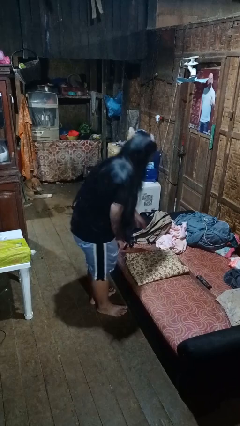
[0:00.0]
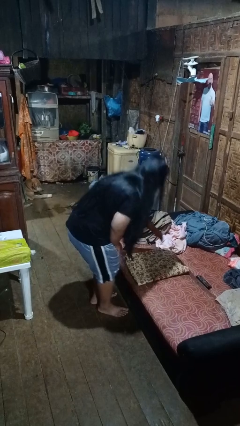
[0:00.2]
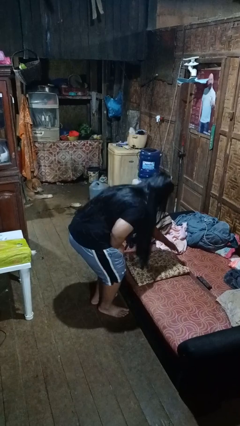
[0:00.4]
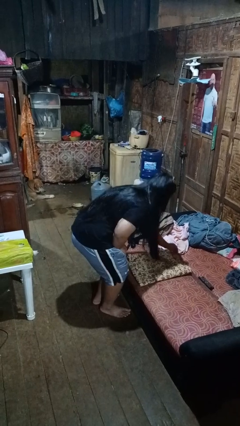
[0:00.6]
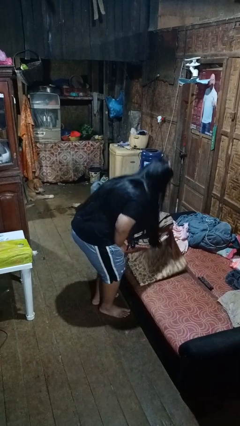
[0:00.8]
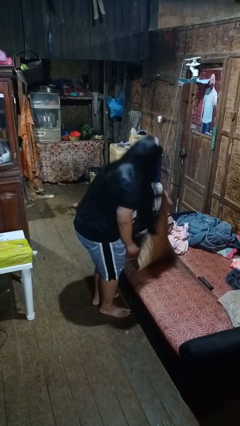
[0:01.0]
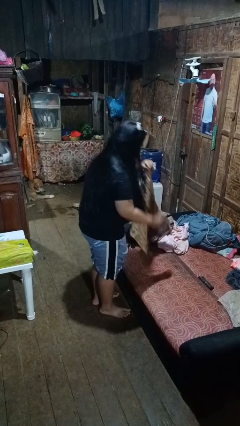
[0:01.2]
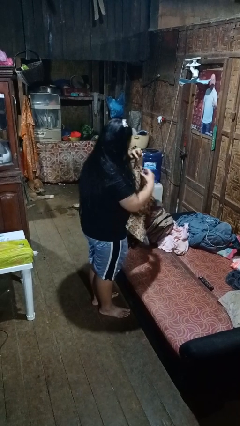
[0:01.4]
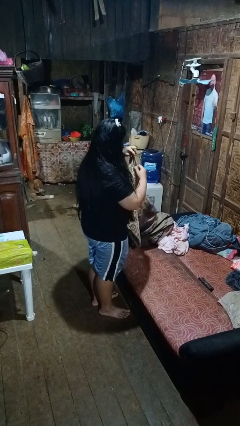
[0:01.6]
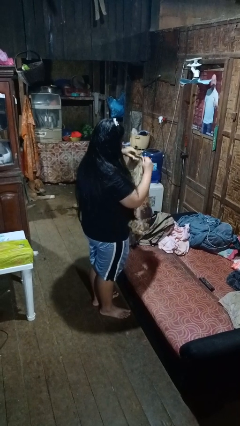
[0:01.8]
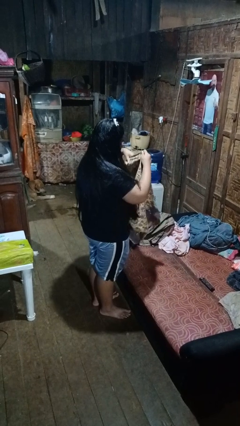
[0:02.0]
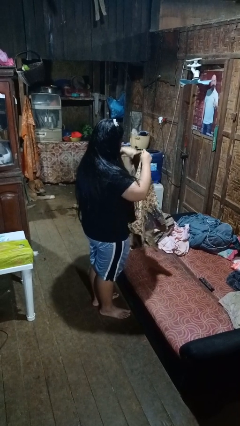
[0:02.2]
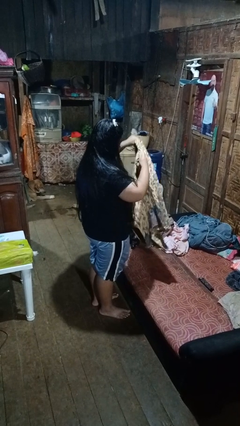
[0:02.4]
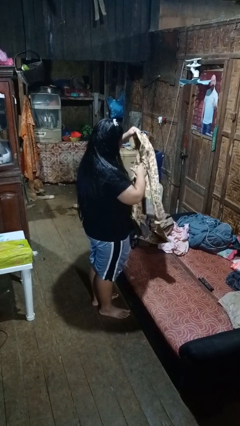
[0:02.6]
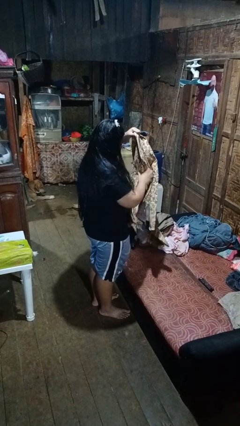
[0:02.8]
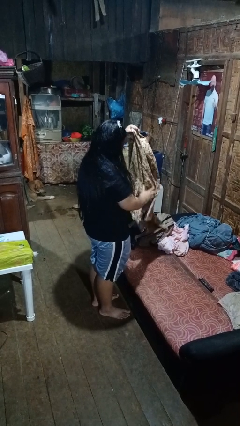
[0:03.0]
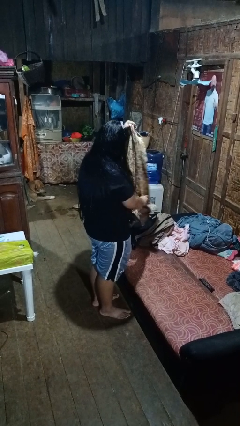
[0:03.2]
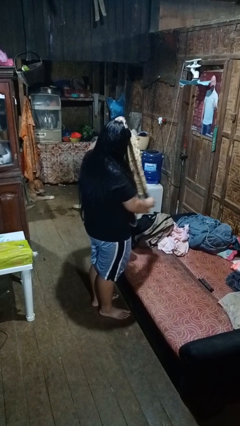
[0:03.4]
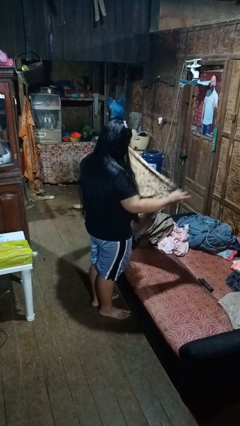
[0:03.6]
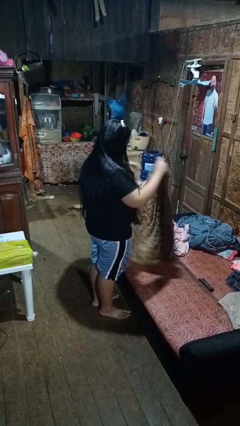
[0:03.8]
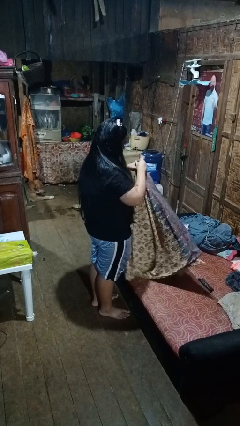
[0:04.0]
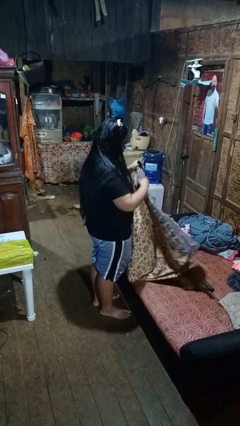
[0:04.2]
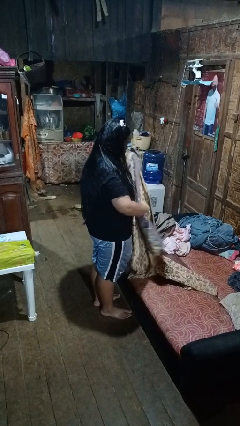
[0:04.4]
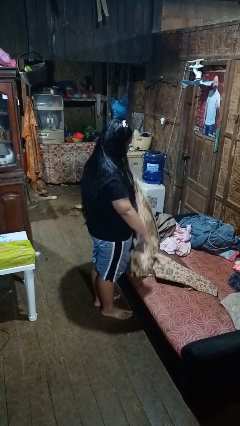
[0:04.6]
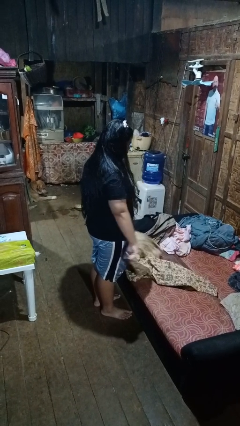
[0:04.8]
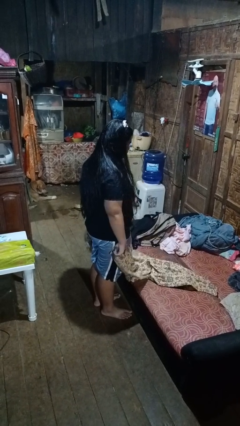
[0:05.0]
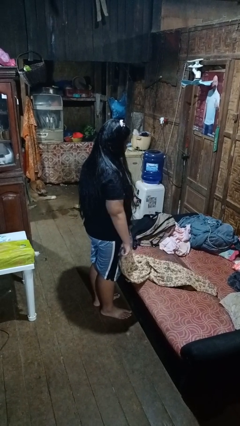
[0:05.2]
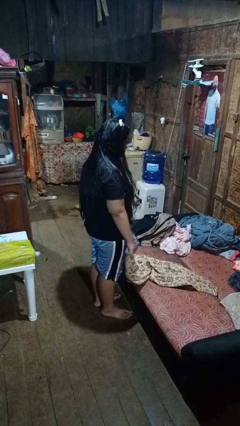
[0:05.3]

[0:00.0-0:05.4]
person unfolds blanket

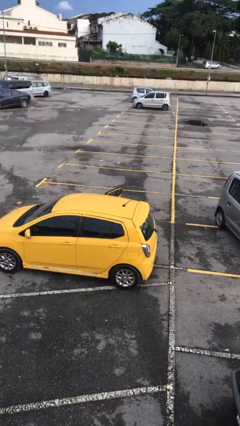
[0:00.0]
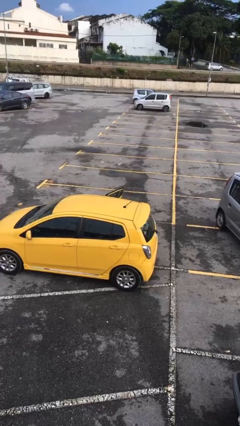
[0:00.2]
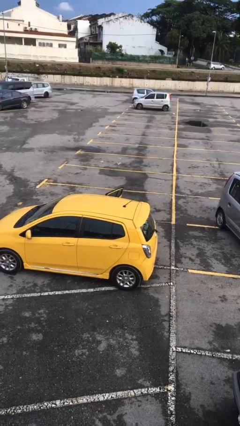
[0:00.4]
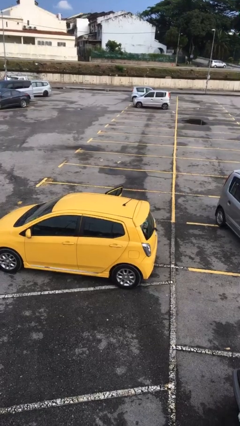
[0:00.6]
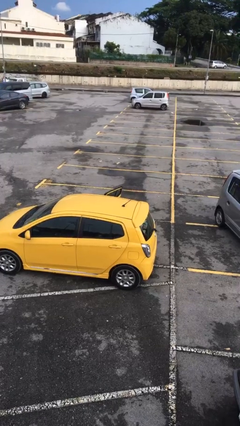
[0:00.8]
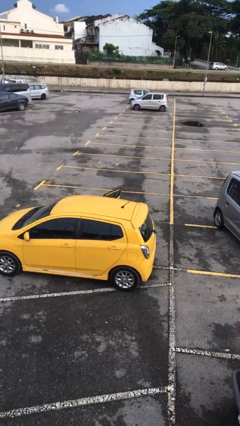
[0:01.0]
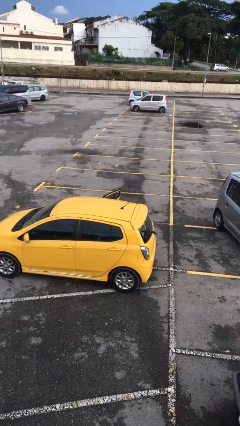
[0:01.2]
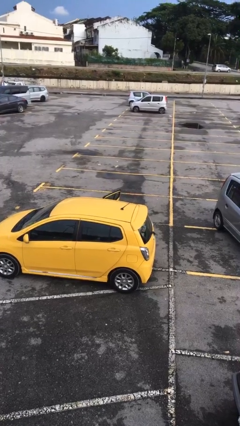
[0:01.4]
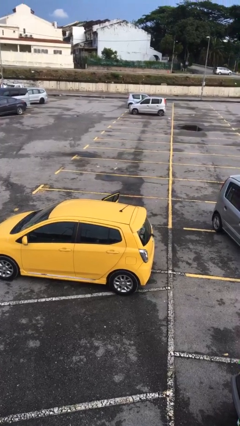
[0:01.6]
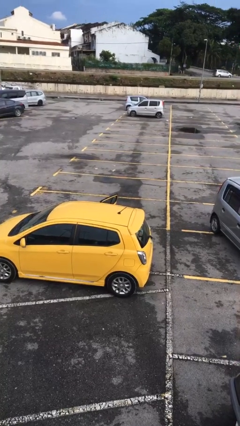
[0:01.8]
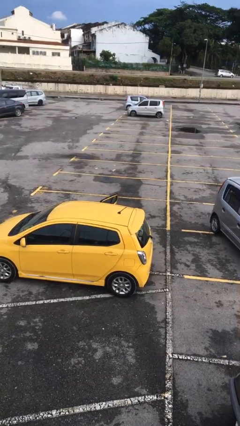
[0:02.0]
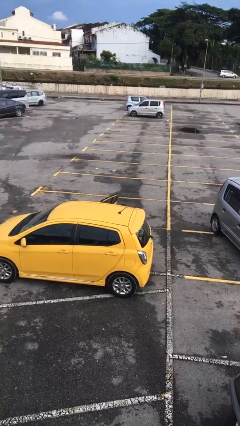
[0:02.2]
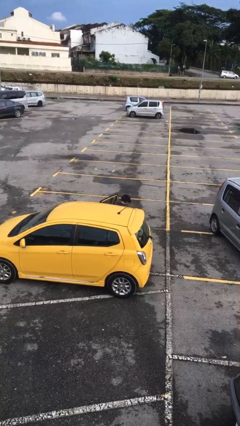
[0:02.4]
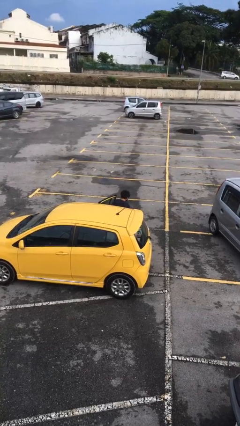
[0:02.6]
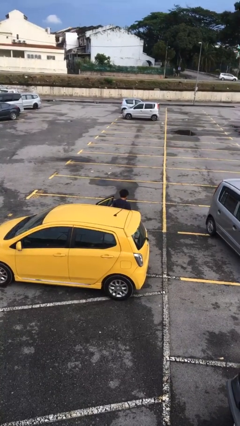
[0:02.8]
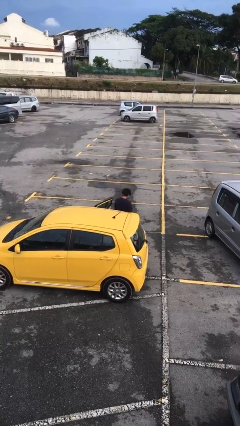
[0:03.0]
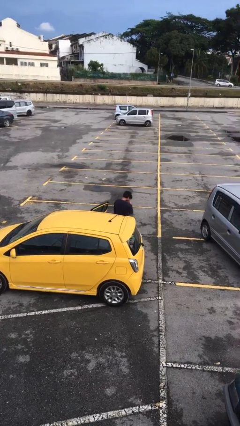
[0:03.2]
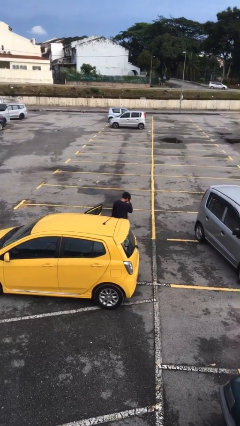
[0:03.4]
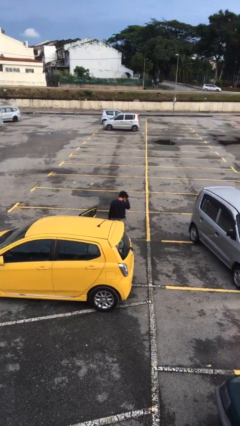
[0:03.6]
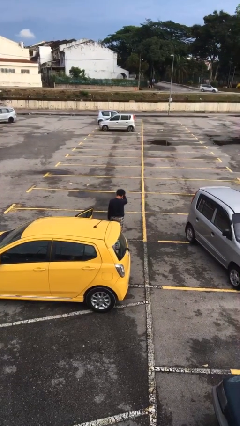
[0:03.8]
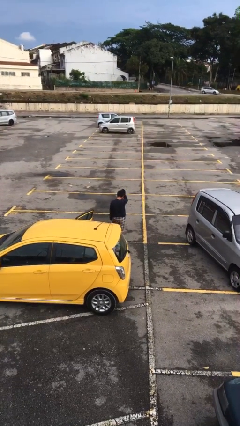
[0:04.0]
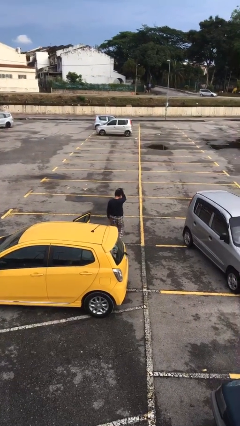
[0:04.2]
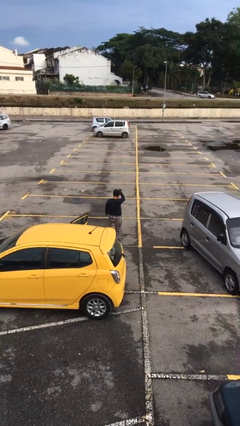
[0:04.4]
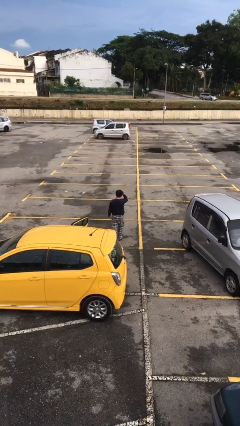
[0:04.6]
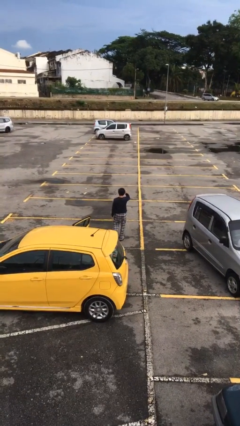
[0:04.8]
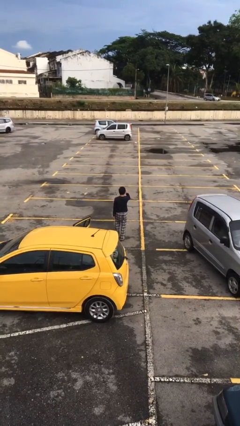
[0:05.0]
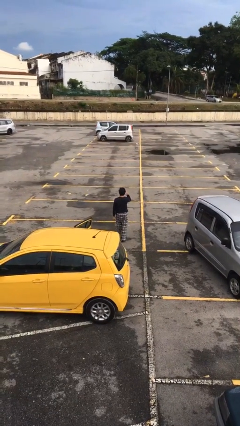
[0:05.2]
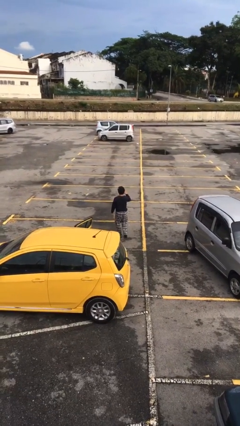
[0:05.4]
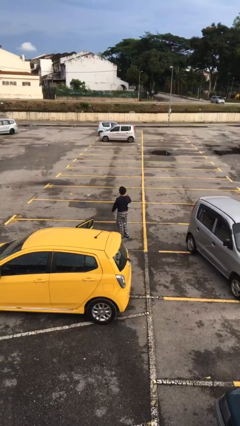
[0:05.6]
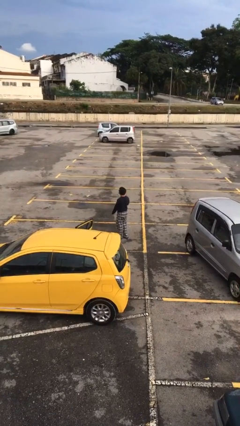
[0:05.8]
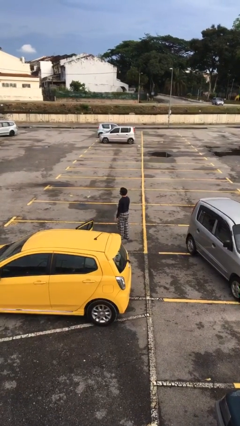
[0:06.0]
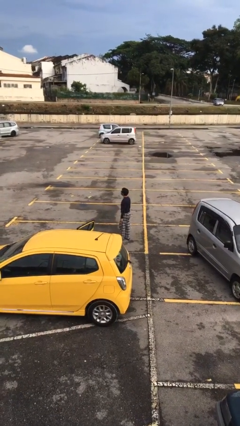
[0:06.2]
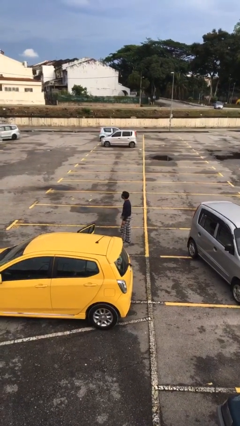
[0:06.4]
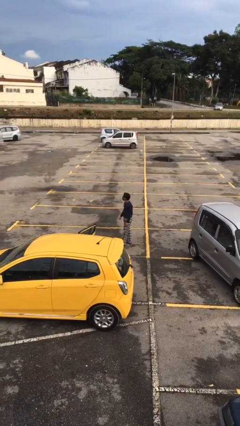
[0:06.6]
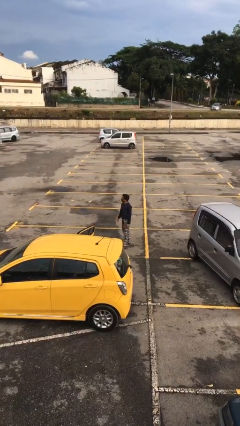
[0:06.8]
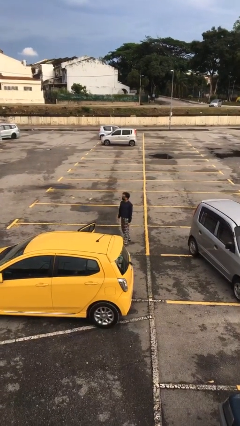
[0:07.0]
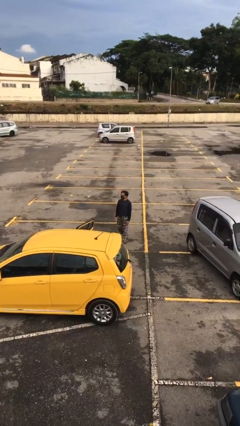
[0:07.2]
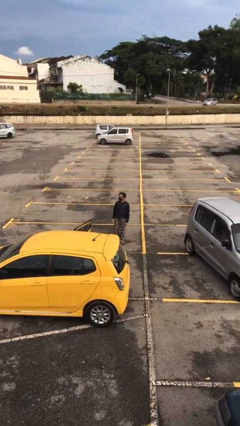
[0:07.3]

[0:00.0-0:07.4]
person exits car

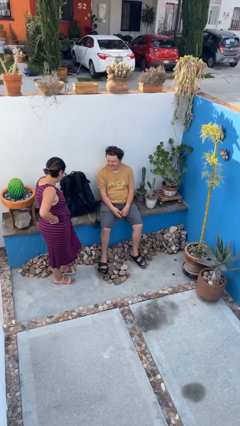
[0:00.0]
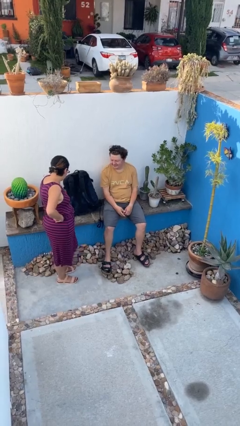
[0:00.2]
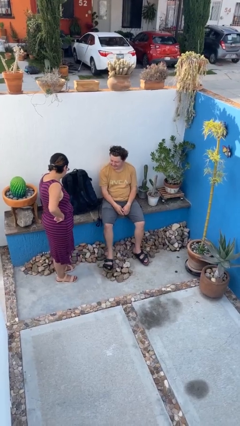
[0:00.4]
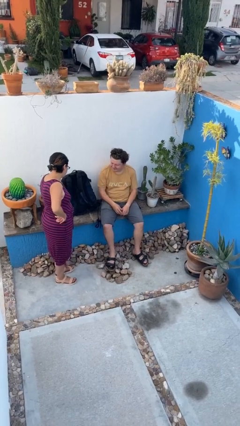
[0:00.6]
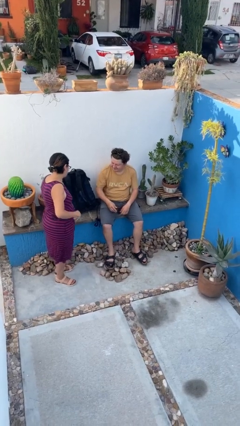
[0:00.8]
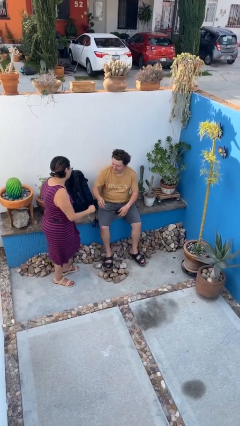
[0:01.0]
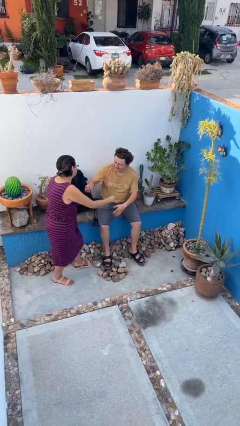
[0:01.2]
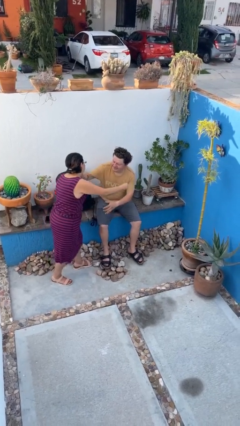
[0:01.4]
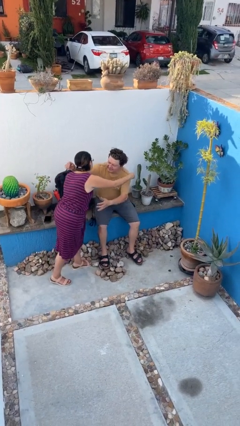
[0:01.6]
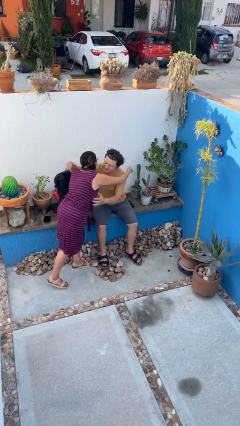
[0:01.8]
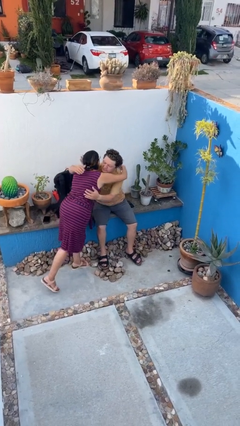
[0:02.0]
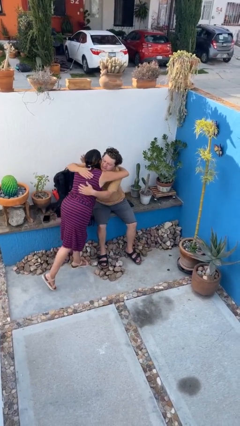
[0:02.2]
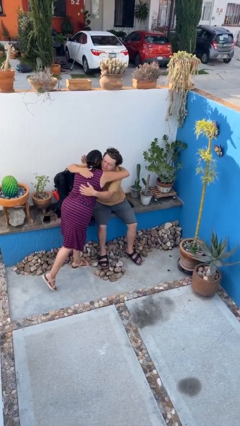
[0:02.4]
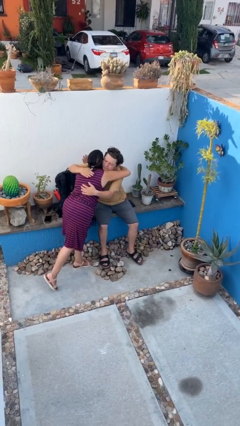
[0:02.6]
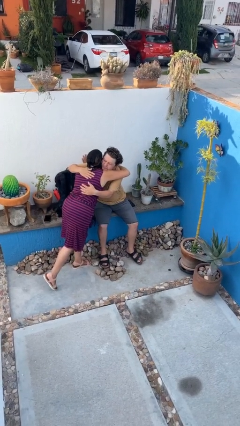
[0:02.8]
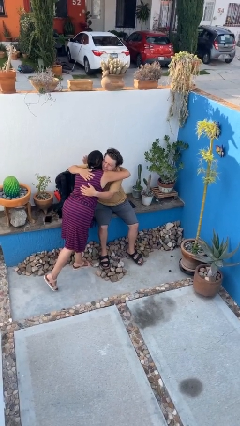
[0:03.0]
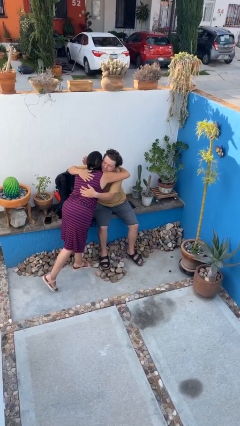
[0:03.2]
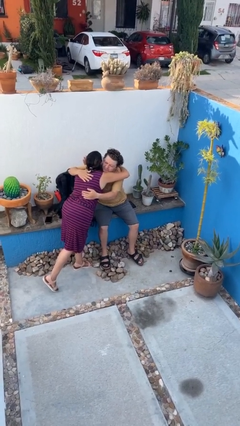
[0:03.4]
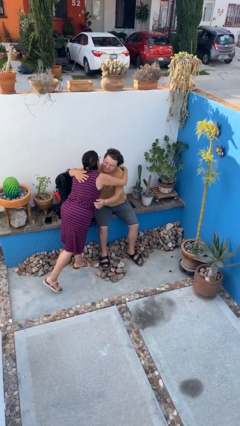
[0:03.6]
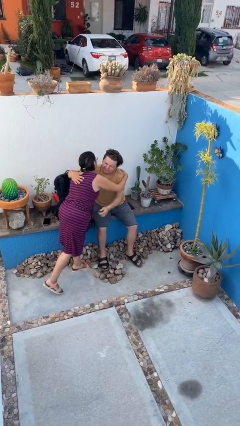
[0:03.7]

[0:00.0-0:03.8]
person embraces person

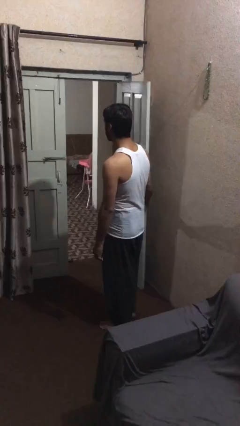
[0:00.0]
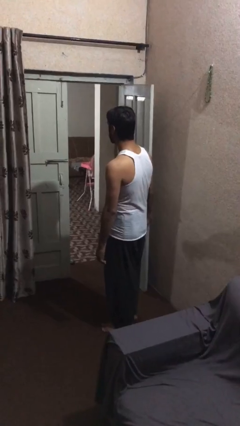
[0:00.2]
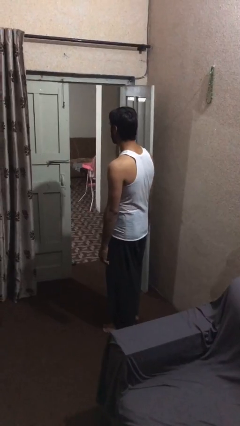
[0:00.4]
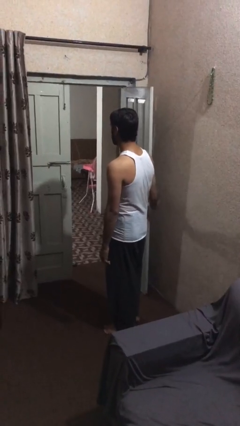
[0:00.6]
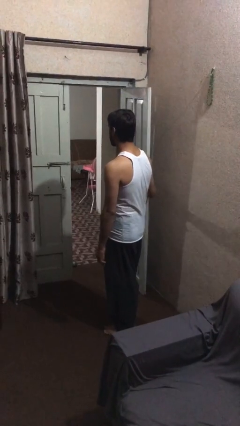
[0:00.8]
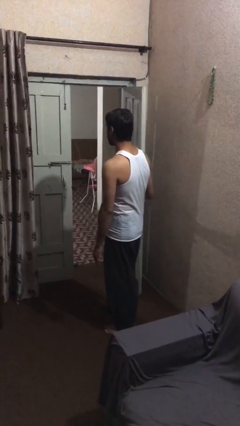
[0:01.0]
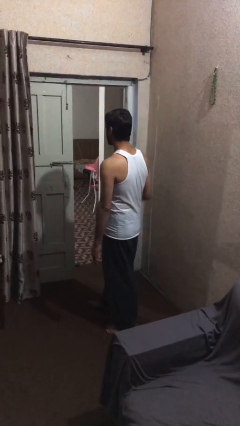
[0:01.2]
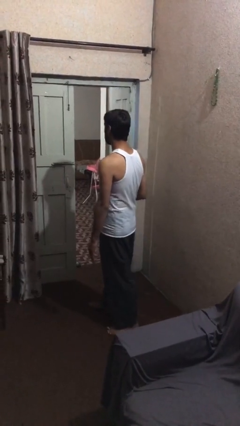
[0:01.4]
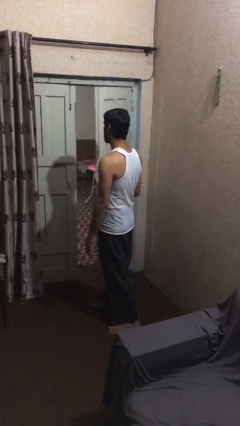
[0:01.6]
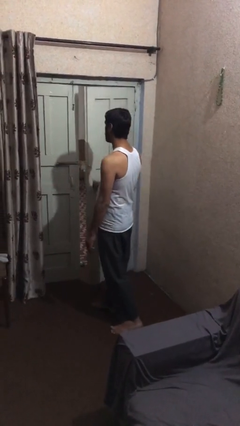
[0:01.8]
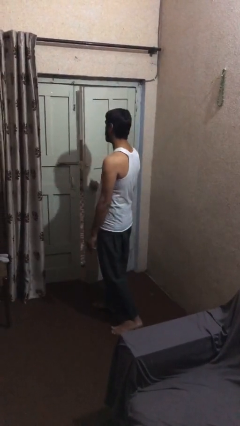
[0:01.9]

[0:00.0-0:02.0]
person closes facility door
